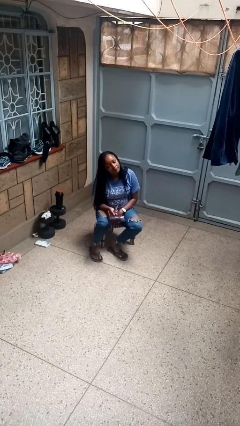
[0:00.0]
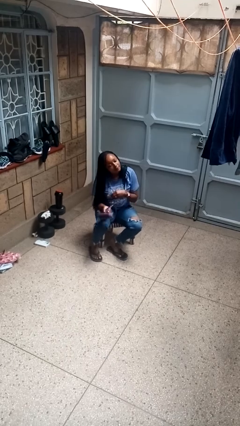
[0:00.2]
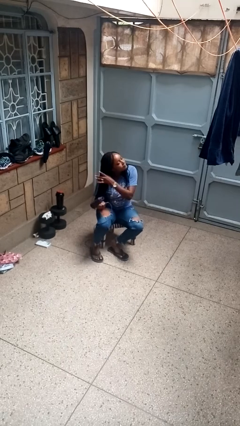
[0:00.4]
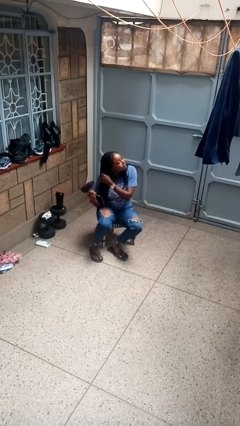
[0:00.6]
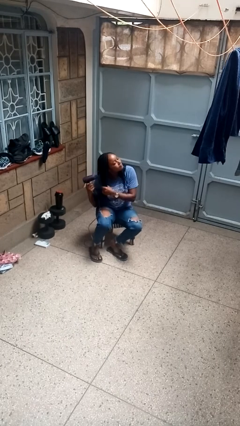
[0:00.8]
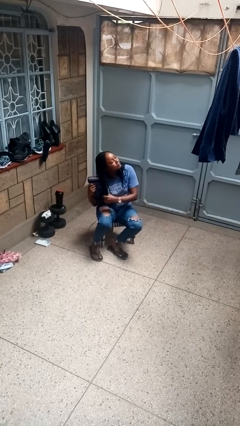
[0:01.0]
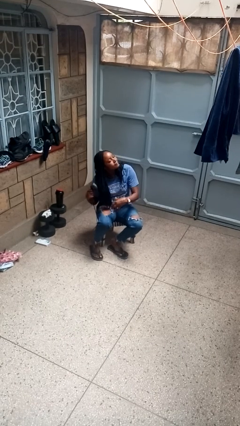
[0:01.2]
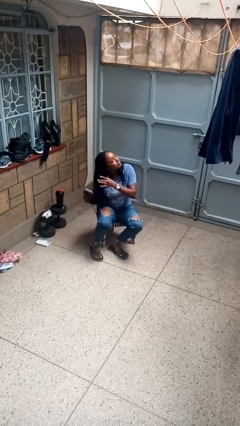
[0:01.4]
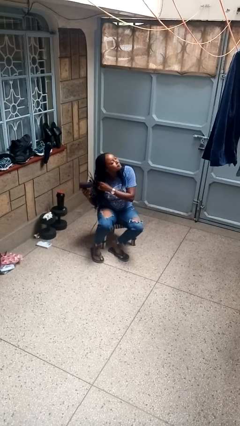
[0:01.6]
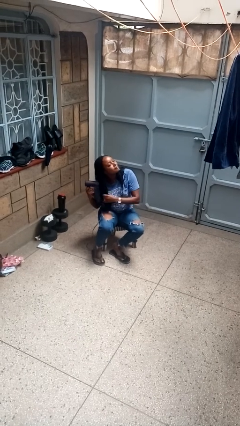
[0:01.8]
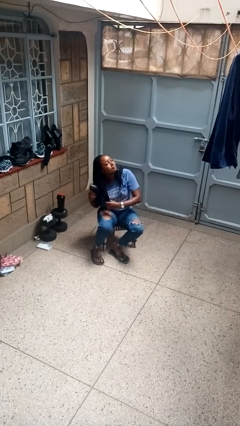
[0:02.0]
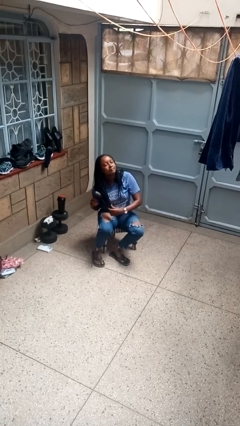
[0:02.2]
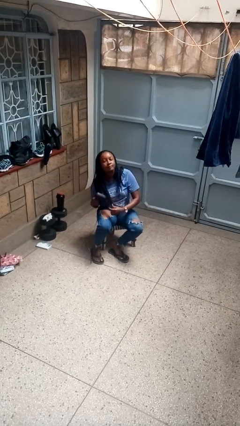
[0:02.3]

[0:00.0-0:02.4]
person dries hair with hairdryer

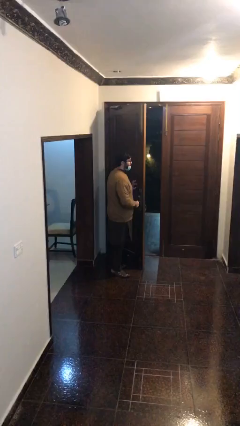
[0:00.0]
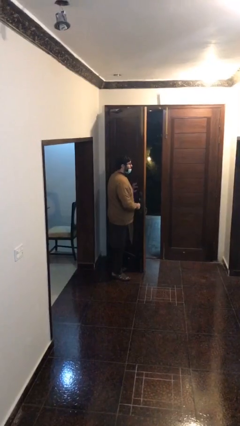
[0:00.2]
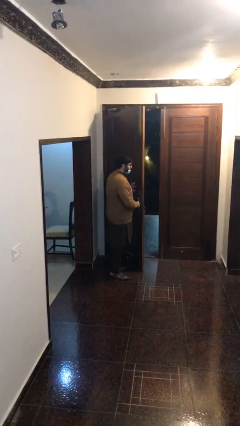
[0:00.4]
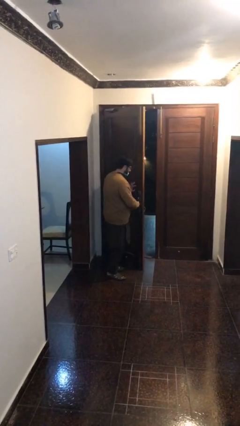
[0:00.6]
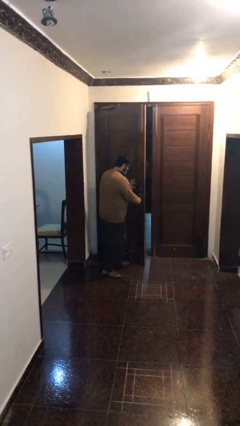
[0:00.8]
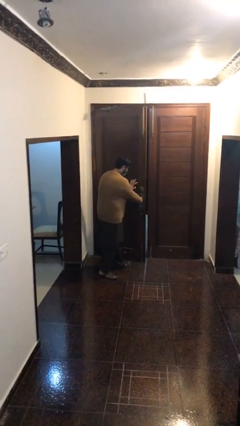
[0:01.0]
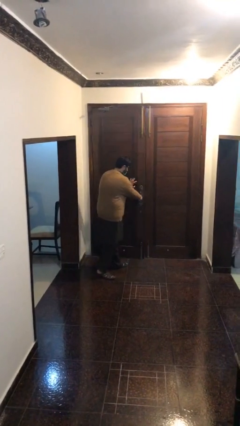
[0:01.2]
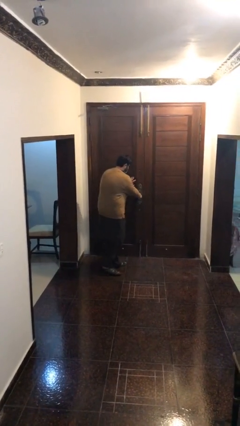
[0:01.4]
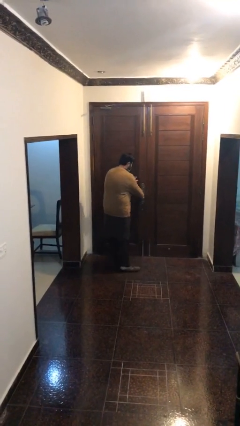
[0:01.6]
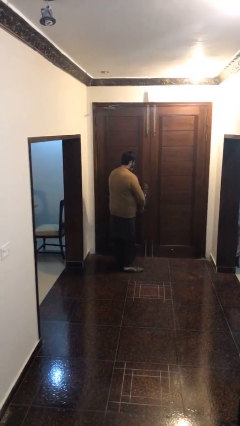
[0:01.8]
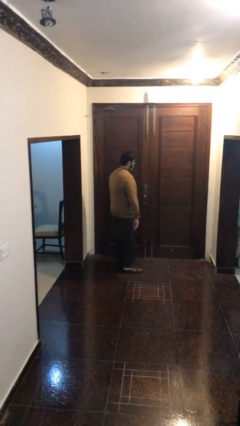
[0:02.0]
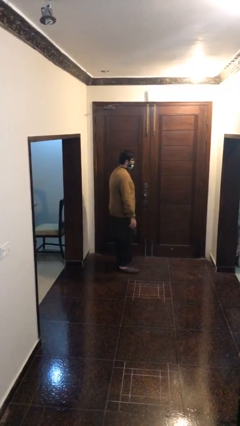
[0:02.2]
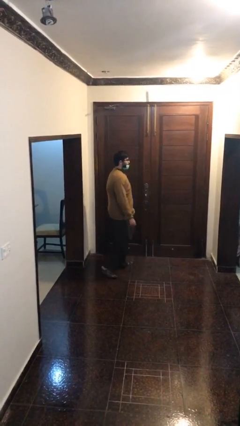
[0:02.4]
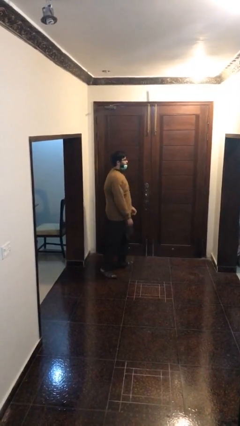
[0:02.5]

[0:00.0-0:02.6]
person closes facility door

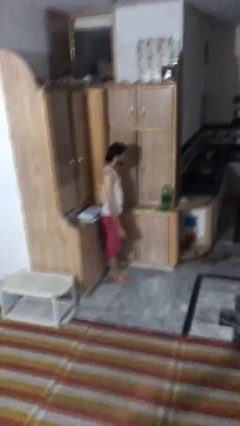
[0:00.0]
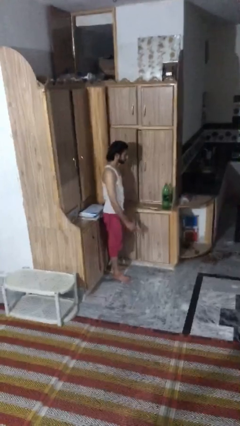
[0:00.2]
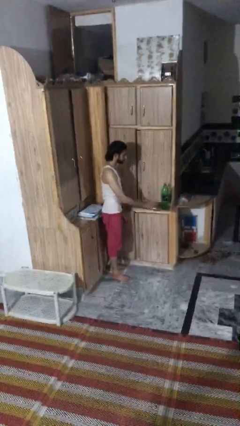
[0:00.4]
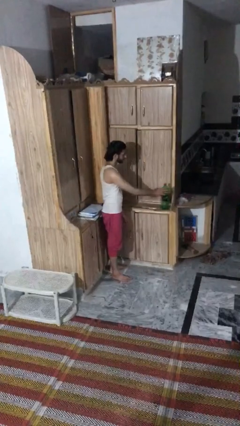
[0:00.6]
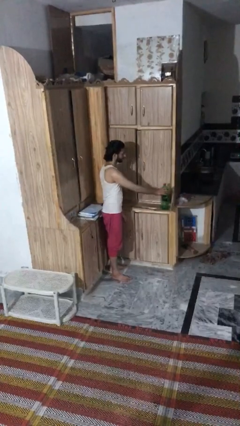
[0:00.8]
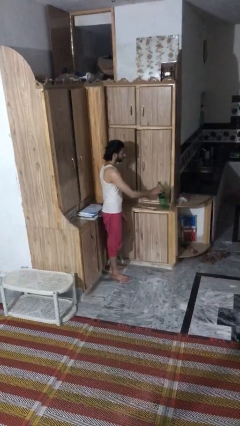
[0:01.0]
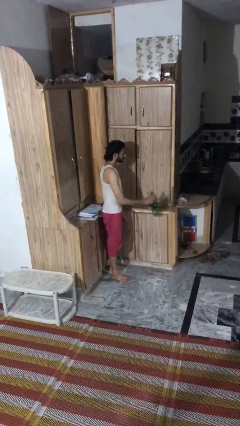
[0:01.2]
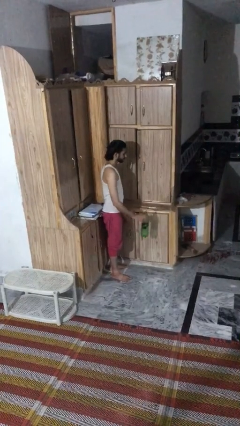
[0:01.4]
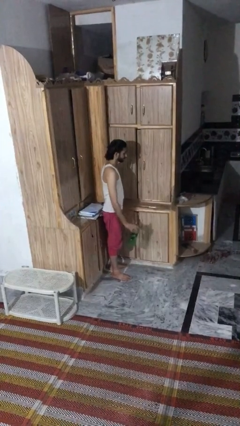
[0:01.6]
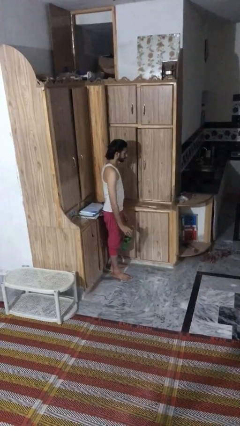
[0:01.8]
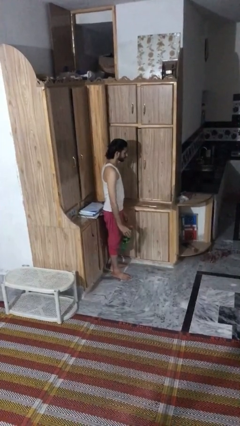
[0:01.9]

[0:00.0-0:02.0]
person picks up object from countertop

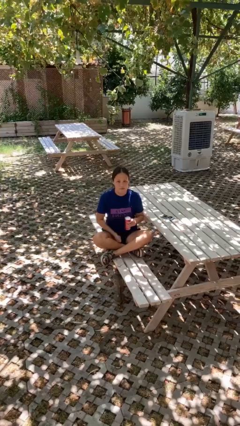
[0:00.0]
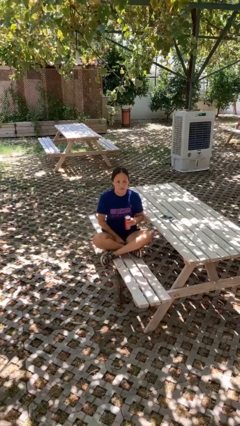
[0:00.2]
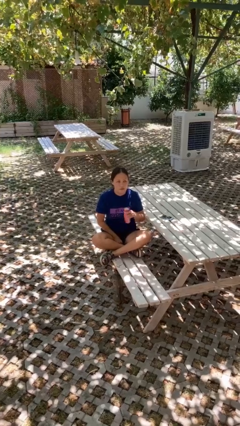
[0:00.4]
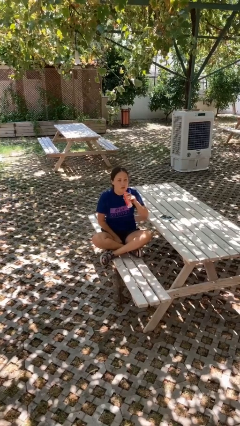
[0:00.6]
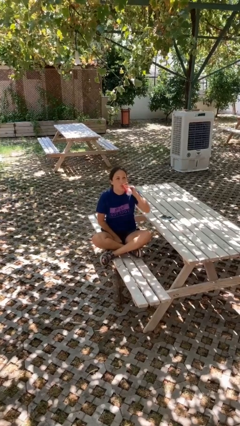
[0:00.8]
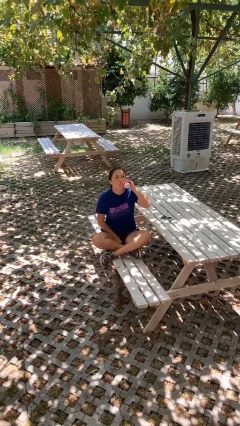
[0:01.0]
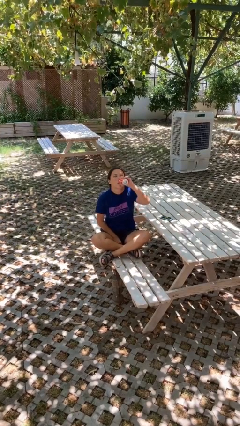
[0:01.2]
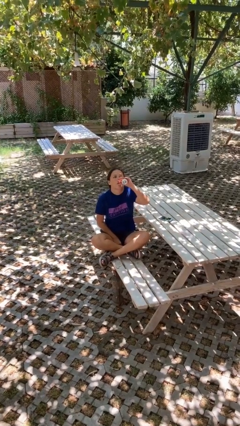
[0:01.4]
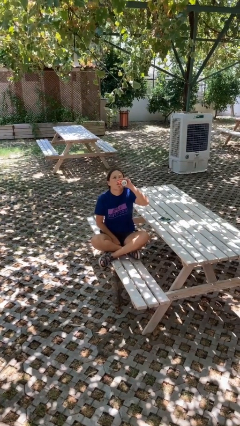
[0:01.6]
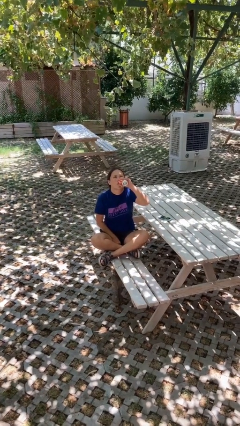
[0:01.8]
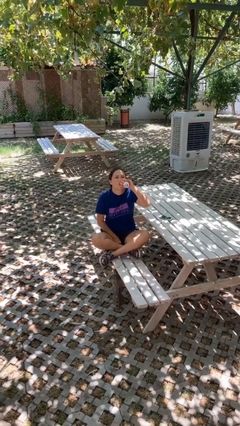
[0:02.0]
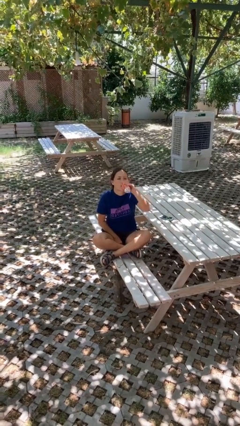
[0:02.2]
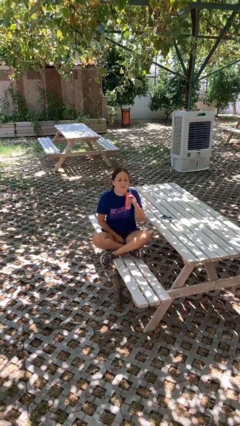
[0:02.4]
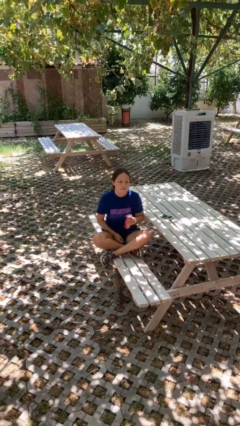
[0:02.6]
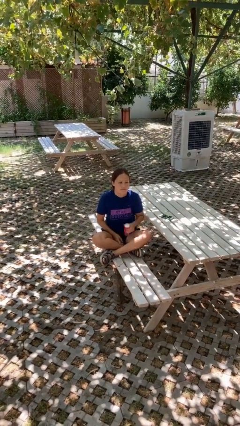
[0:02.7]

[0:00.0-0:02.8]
person drinks from beverage can

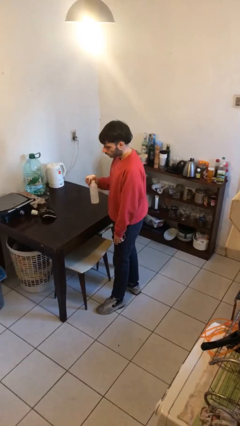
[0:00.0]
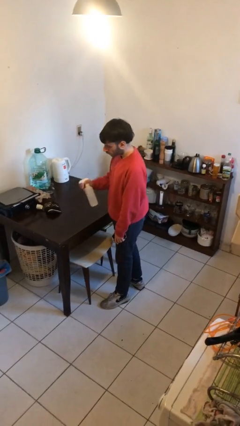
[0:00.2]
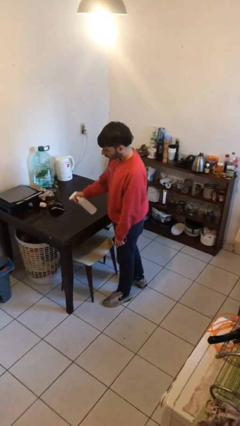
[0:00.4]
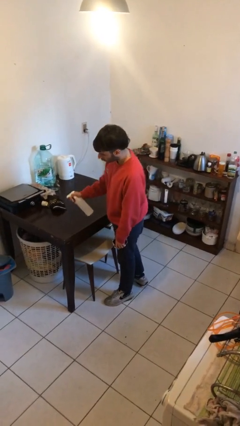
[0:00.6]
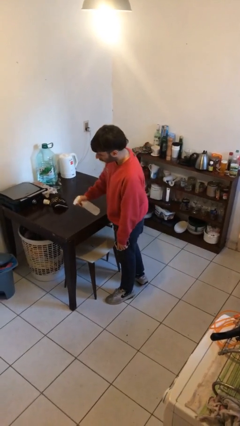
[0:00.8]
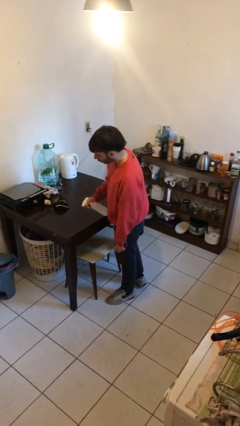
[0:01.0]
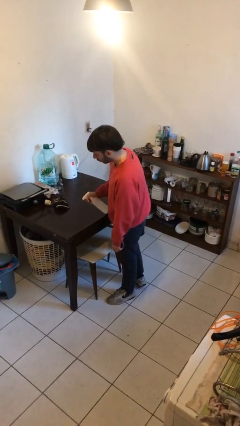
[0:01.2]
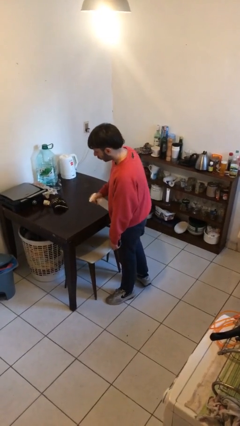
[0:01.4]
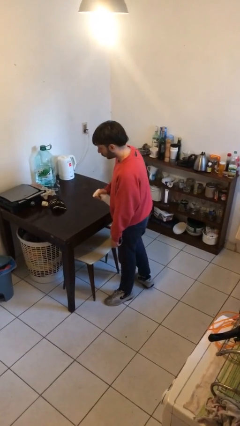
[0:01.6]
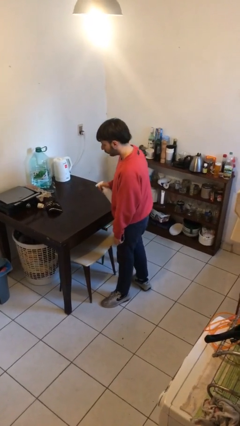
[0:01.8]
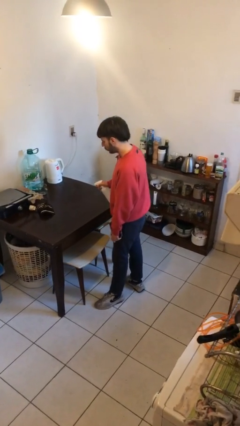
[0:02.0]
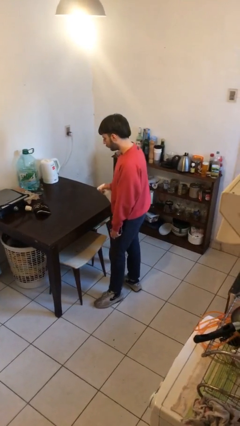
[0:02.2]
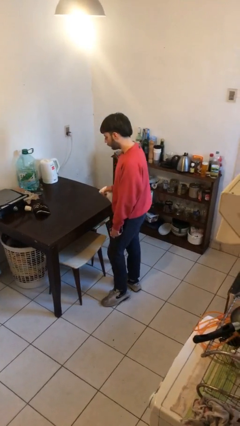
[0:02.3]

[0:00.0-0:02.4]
person sprays from bottle

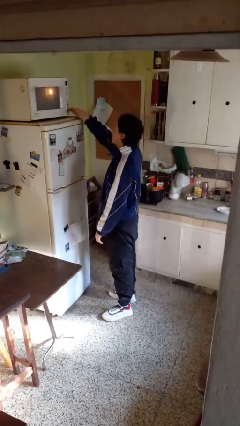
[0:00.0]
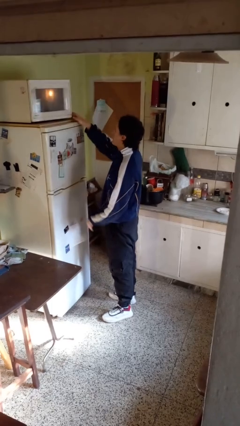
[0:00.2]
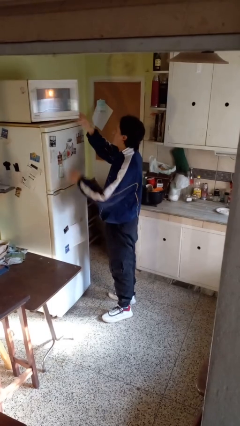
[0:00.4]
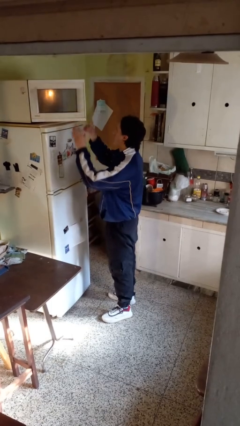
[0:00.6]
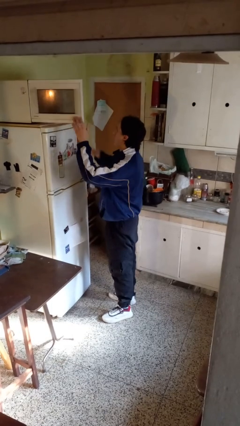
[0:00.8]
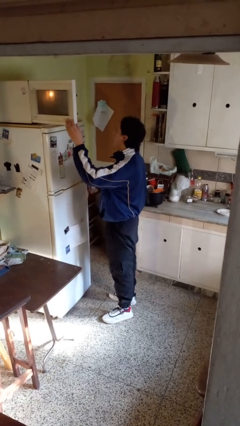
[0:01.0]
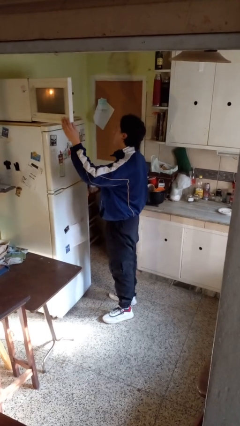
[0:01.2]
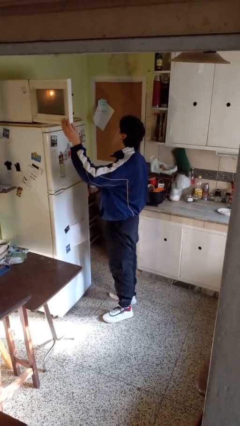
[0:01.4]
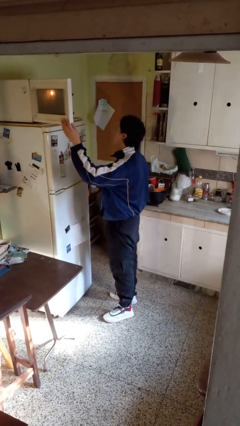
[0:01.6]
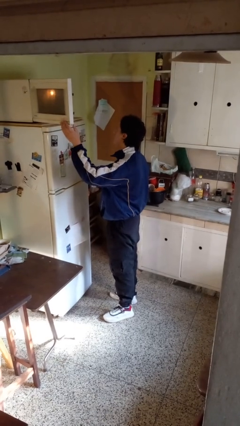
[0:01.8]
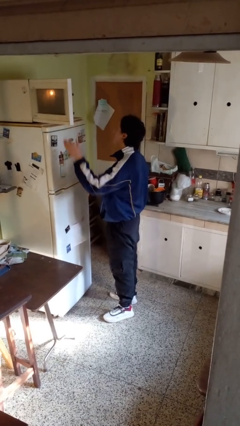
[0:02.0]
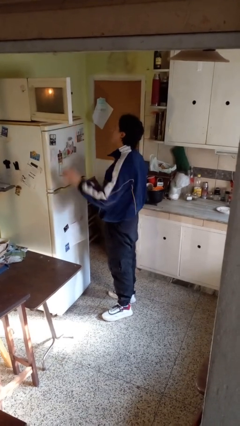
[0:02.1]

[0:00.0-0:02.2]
person opens microwave

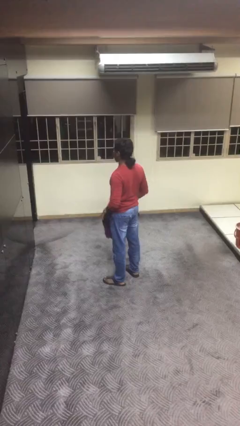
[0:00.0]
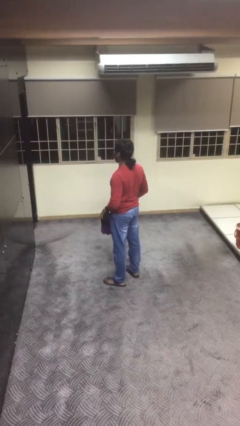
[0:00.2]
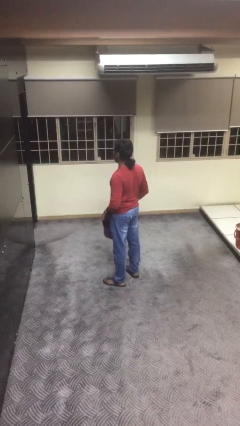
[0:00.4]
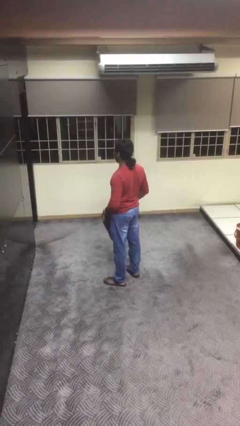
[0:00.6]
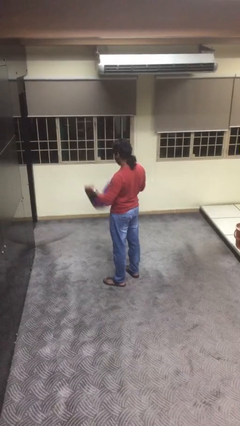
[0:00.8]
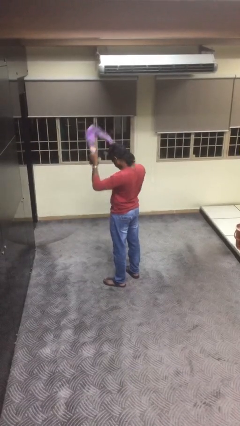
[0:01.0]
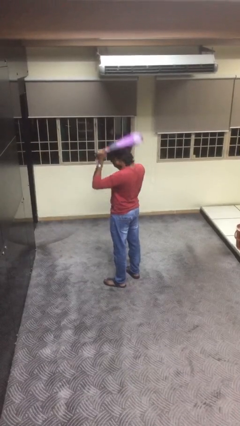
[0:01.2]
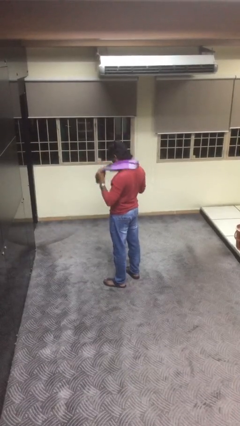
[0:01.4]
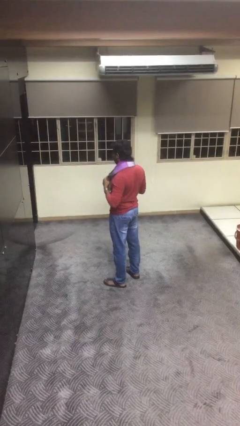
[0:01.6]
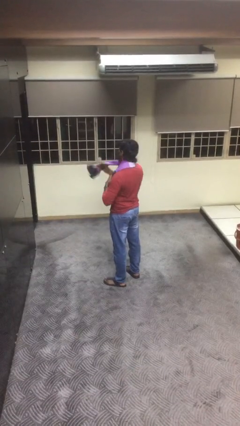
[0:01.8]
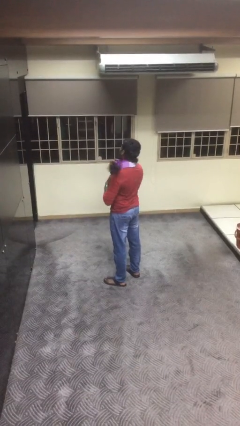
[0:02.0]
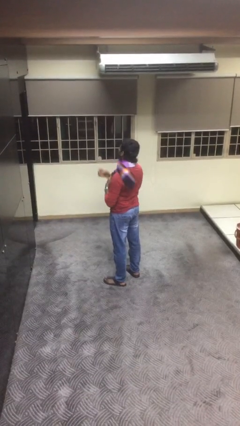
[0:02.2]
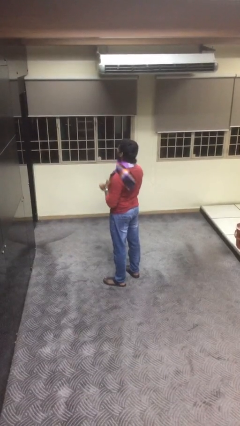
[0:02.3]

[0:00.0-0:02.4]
person puts on scarf
